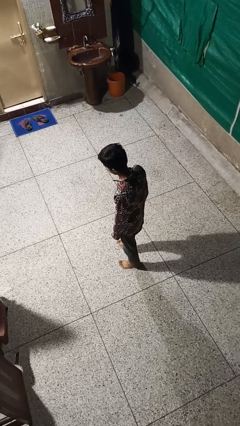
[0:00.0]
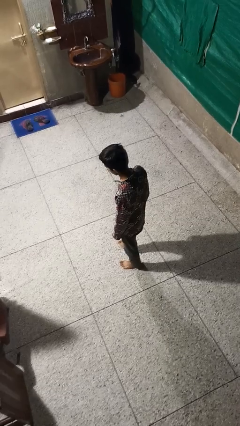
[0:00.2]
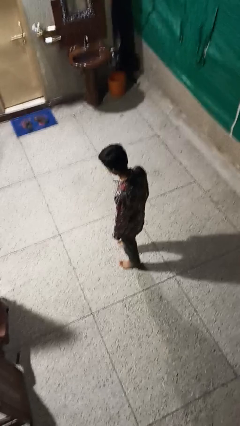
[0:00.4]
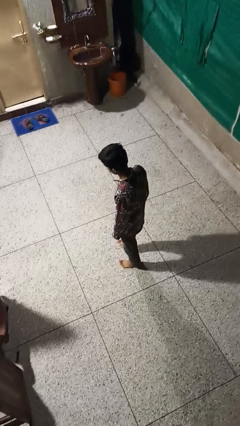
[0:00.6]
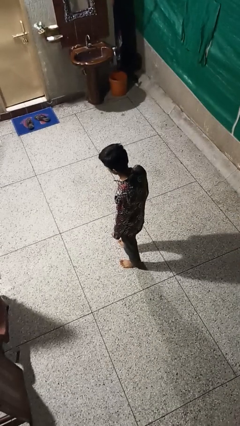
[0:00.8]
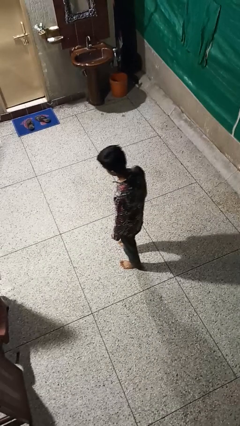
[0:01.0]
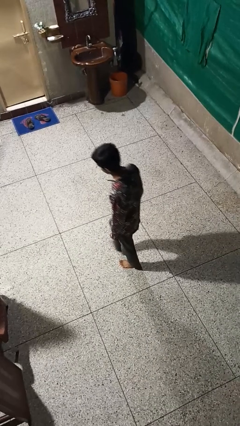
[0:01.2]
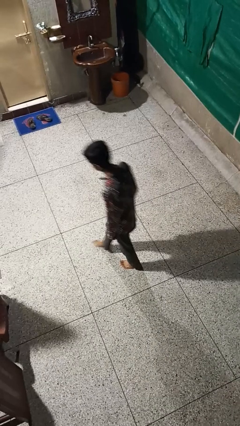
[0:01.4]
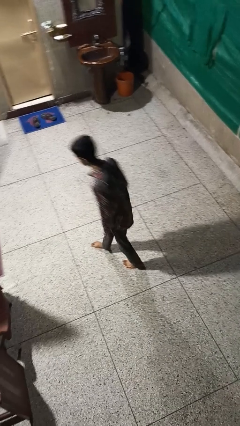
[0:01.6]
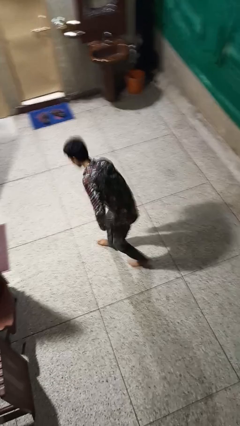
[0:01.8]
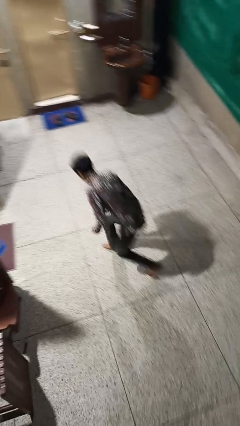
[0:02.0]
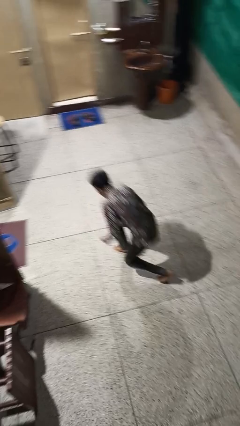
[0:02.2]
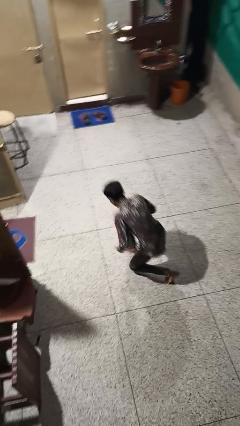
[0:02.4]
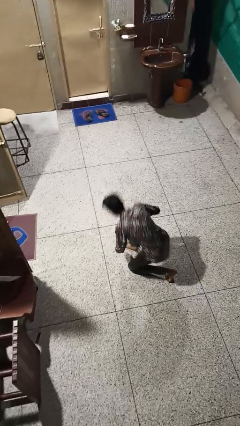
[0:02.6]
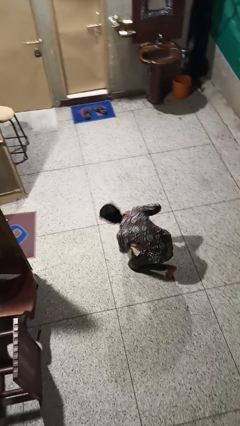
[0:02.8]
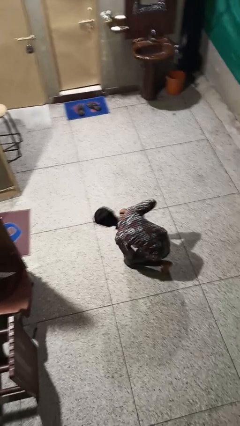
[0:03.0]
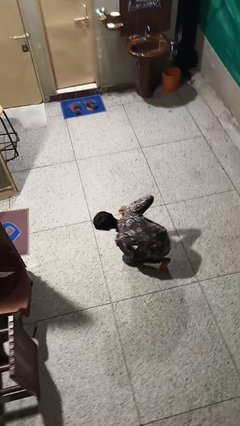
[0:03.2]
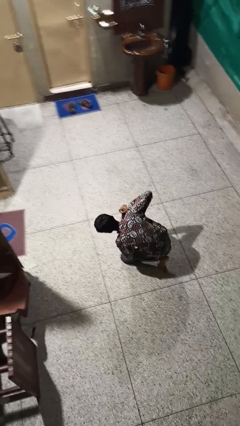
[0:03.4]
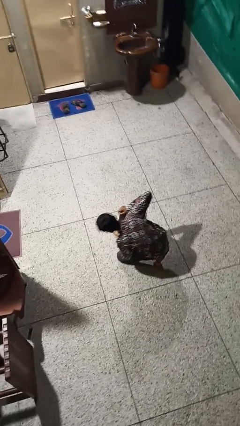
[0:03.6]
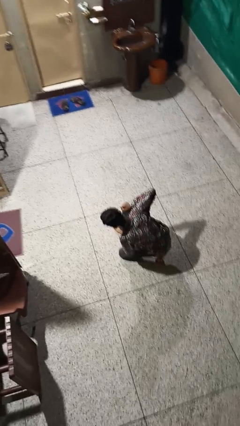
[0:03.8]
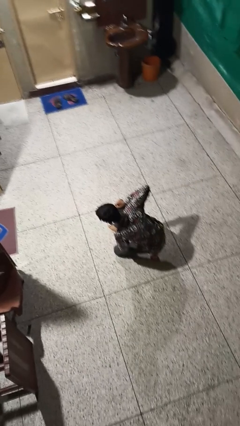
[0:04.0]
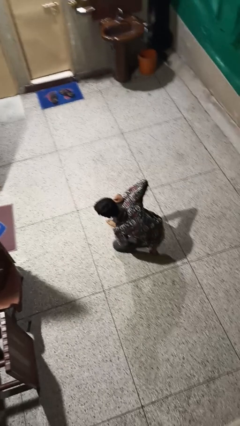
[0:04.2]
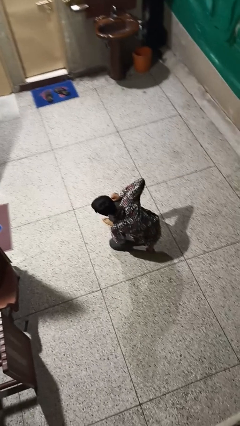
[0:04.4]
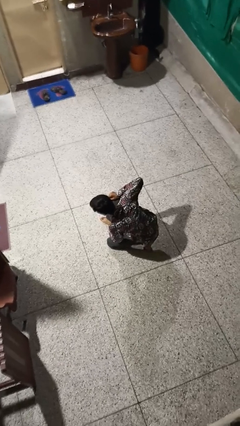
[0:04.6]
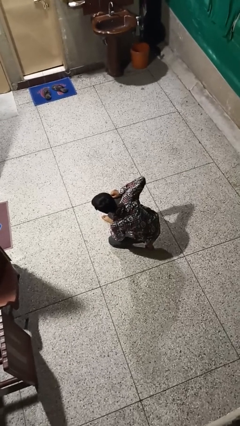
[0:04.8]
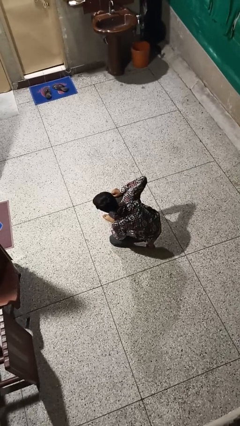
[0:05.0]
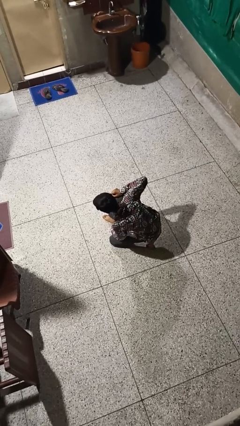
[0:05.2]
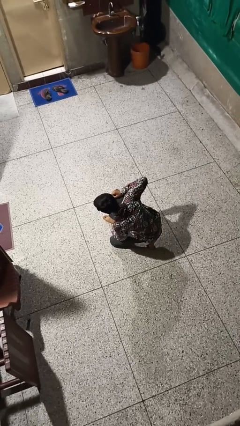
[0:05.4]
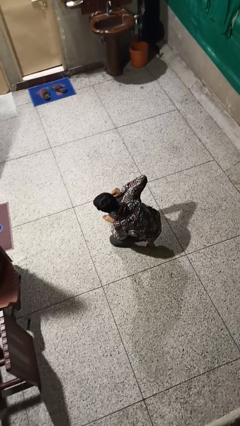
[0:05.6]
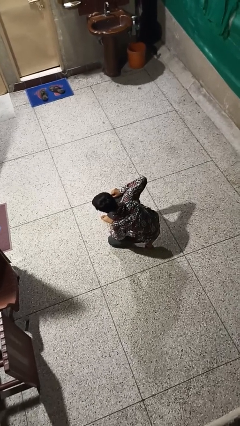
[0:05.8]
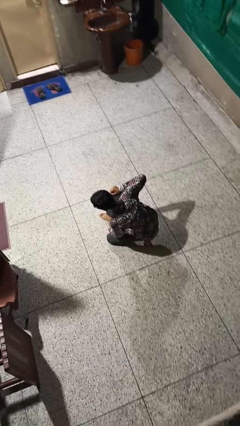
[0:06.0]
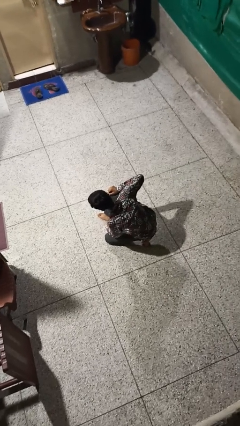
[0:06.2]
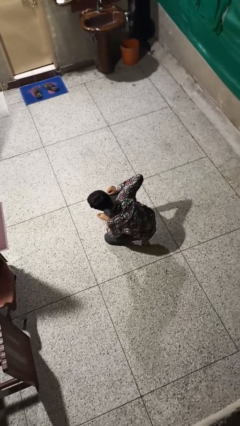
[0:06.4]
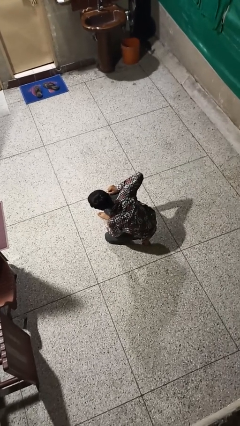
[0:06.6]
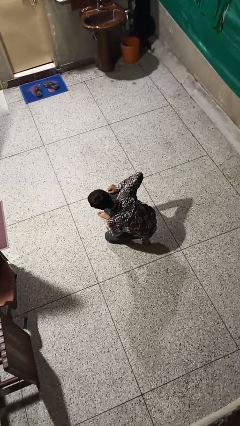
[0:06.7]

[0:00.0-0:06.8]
person kneels

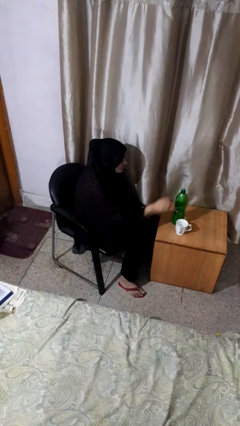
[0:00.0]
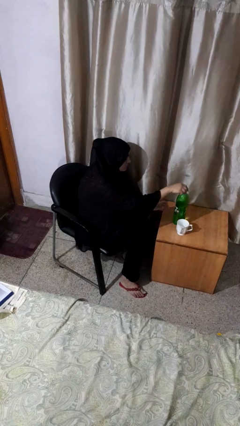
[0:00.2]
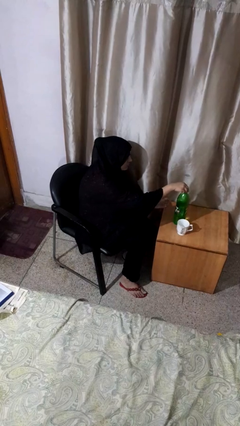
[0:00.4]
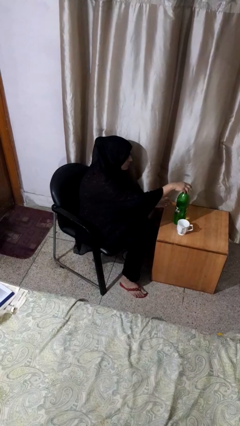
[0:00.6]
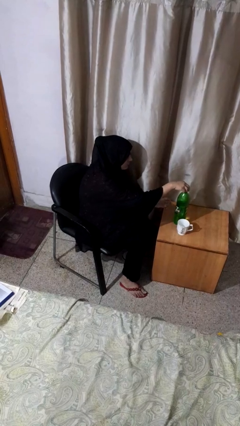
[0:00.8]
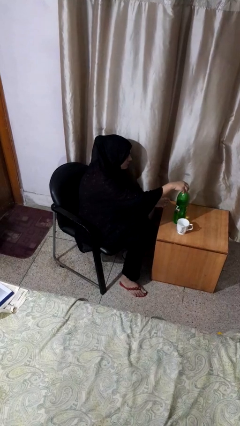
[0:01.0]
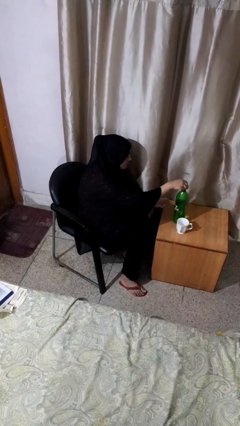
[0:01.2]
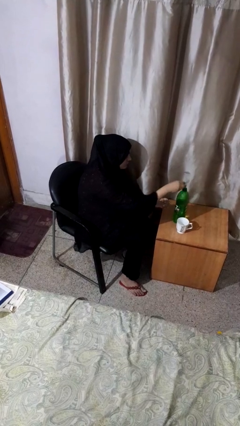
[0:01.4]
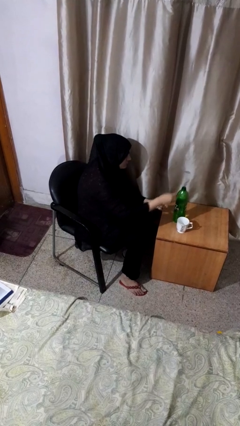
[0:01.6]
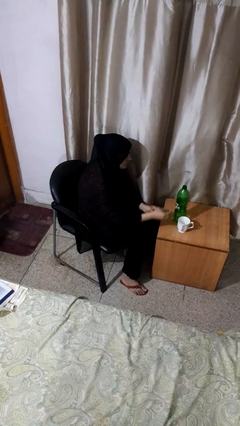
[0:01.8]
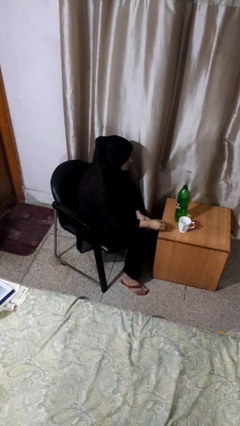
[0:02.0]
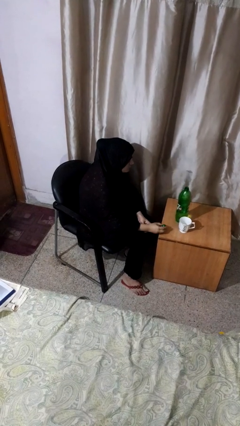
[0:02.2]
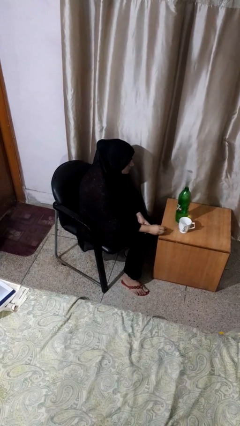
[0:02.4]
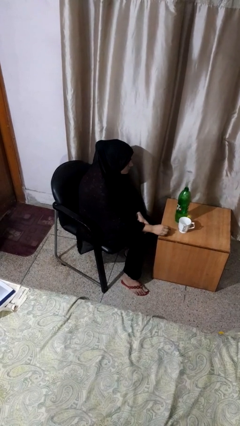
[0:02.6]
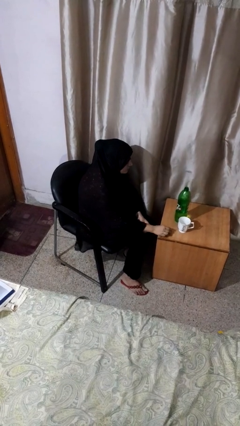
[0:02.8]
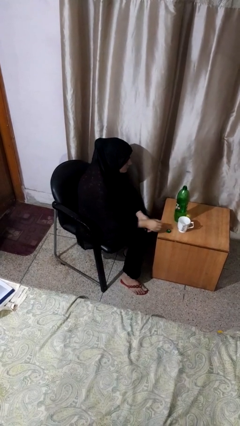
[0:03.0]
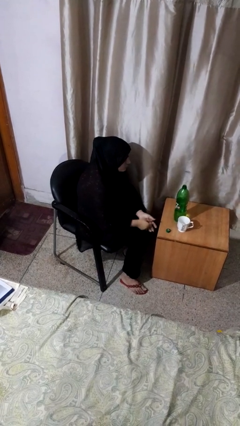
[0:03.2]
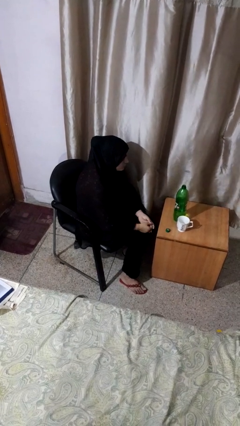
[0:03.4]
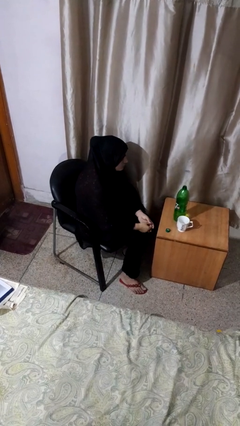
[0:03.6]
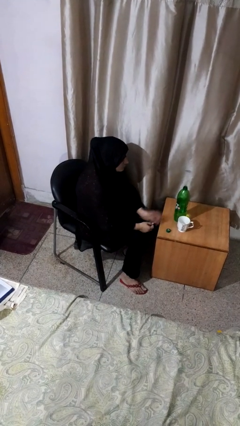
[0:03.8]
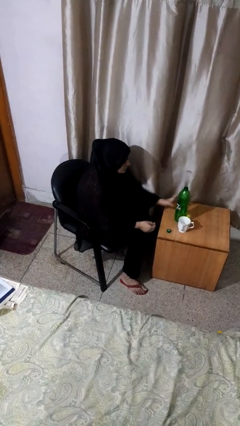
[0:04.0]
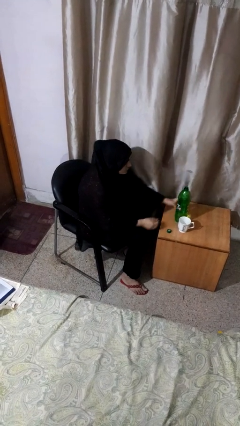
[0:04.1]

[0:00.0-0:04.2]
person unscrews lid from bottle

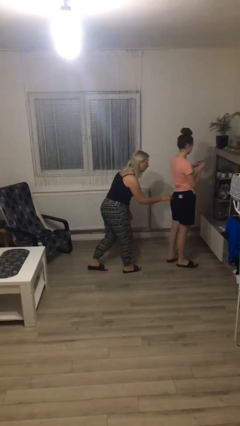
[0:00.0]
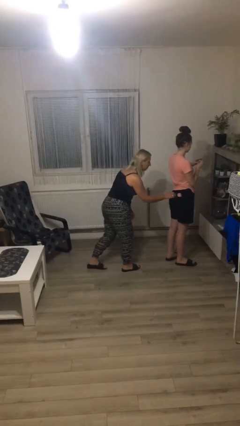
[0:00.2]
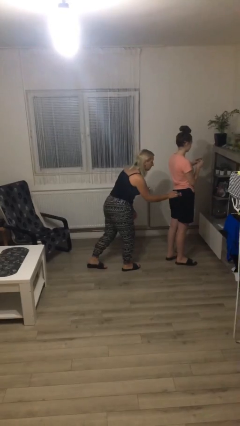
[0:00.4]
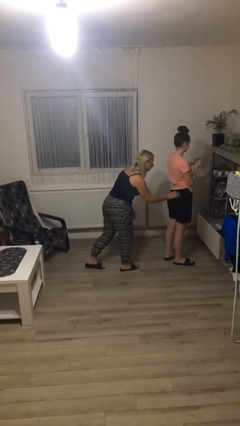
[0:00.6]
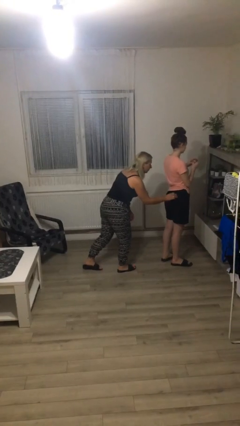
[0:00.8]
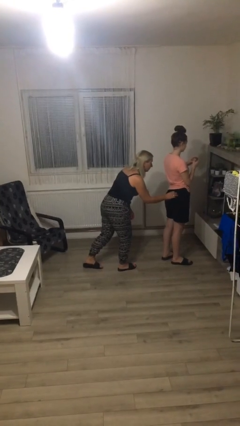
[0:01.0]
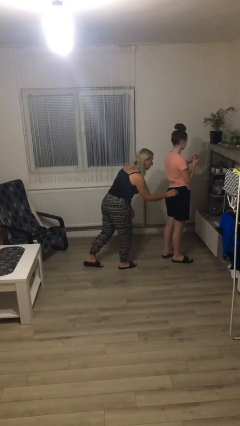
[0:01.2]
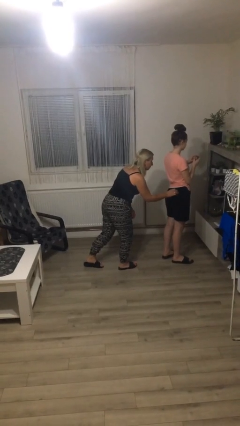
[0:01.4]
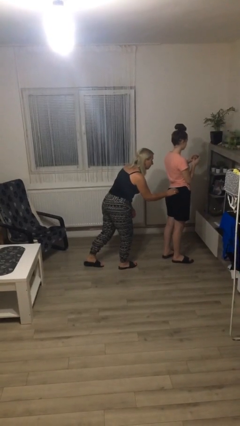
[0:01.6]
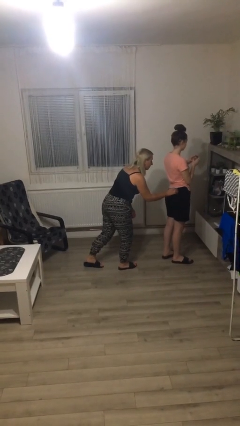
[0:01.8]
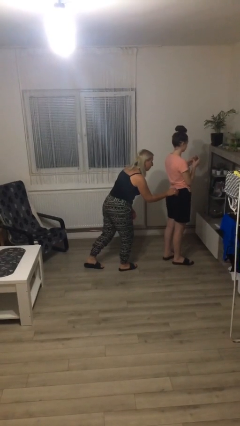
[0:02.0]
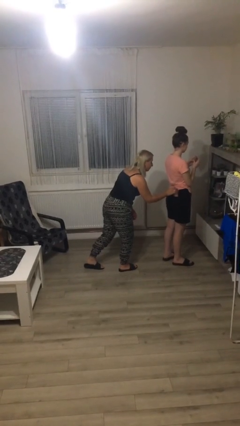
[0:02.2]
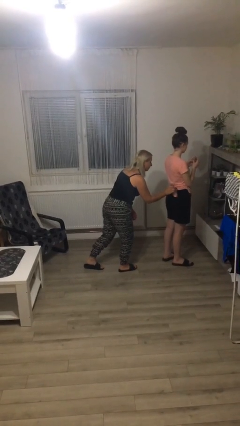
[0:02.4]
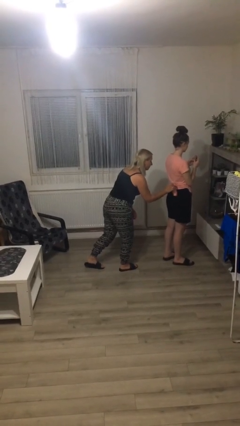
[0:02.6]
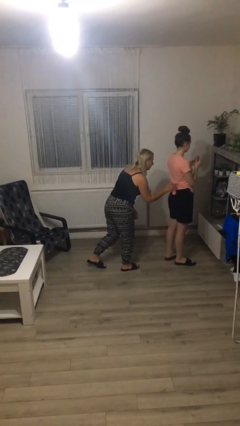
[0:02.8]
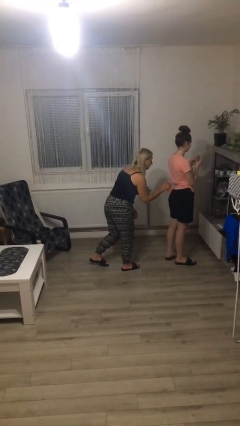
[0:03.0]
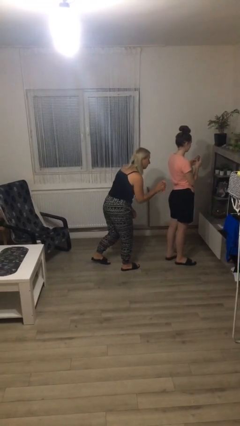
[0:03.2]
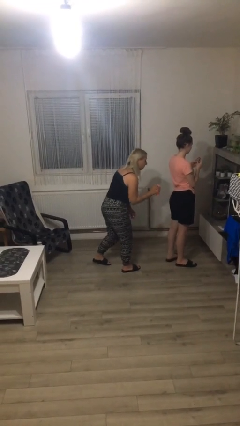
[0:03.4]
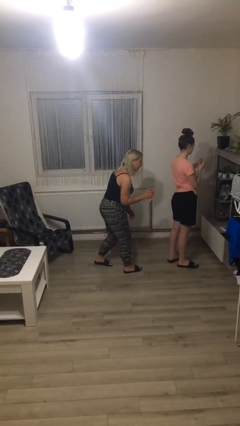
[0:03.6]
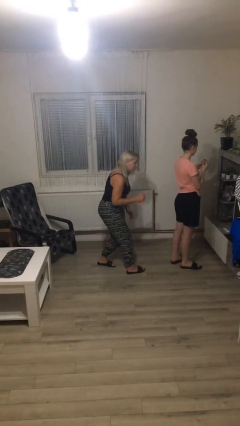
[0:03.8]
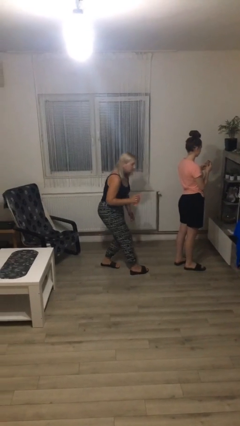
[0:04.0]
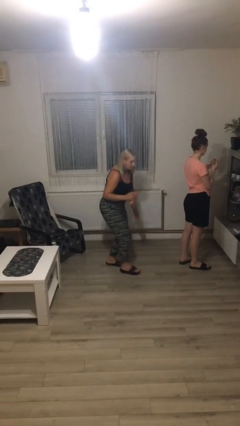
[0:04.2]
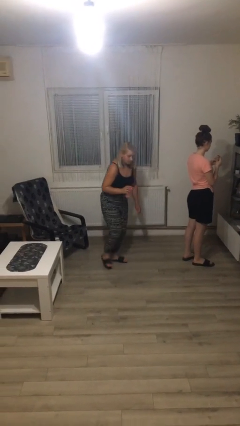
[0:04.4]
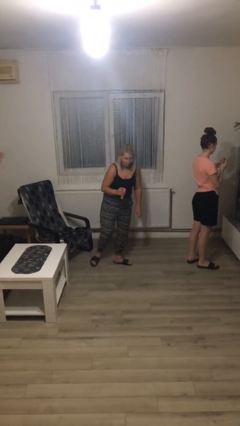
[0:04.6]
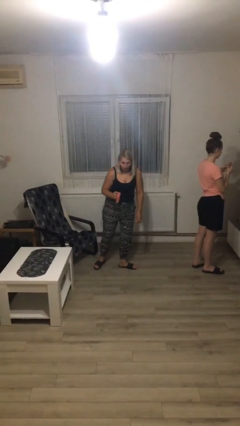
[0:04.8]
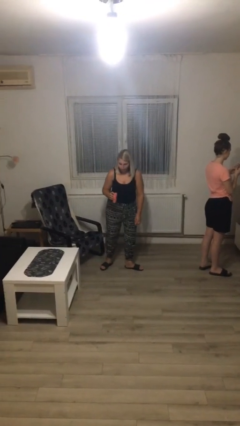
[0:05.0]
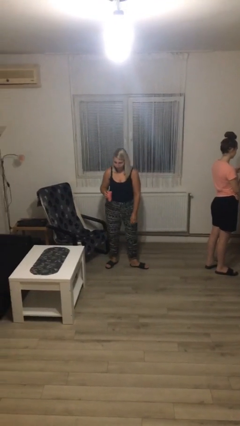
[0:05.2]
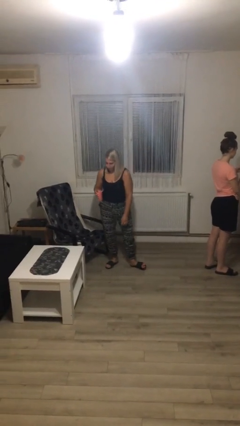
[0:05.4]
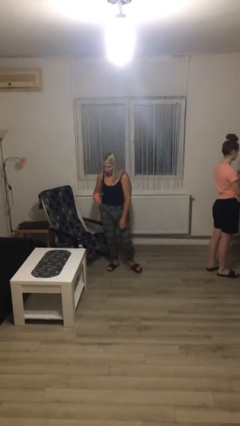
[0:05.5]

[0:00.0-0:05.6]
person steals object from person

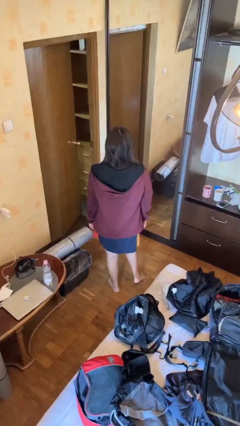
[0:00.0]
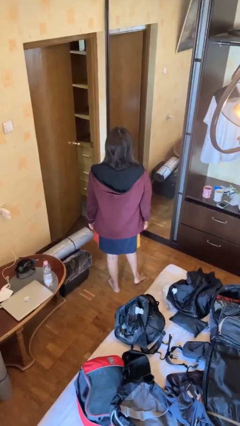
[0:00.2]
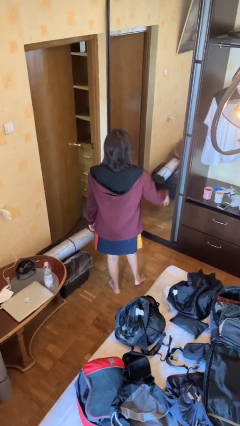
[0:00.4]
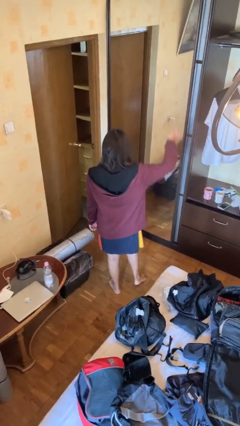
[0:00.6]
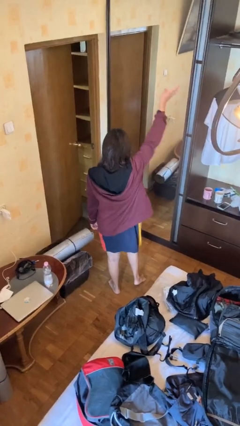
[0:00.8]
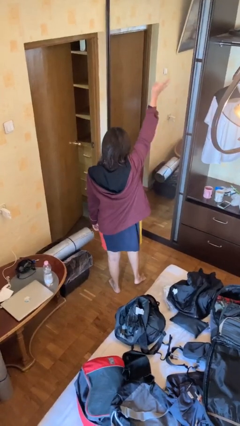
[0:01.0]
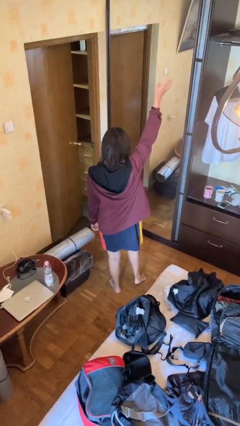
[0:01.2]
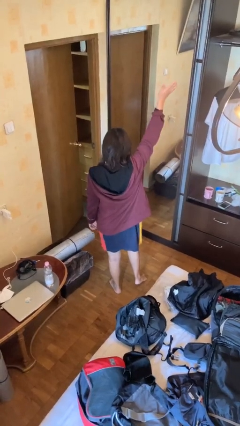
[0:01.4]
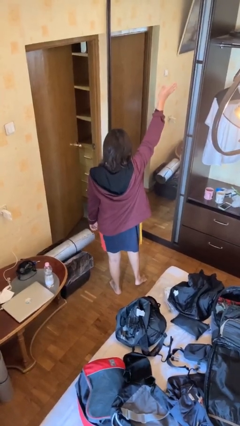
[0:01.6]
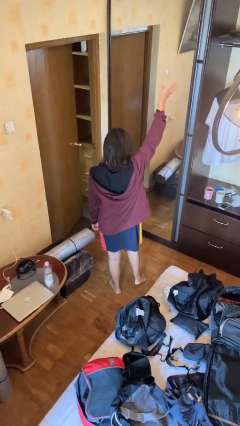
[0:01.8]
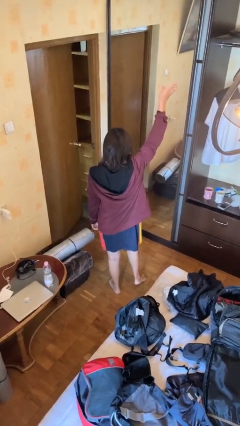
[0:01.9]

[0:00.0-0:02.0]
person gestures swipe up
